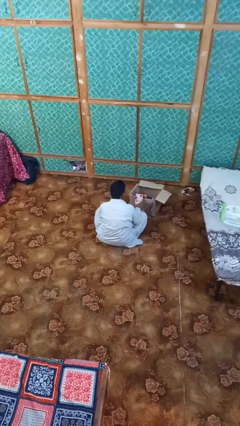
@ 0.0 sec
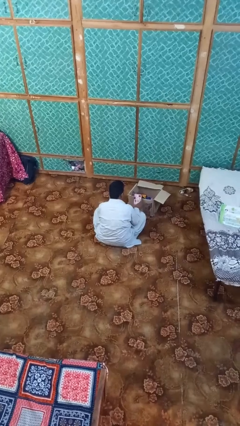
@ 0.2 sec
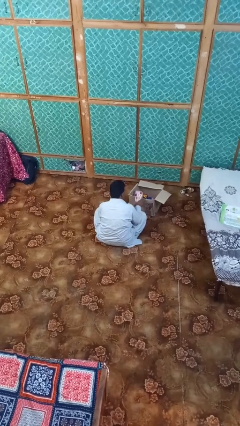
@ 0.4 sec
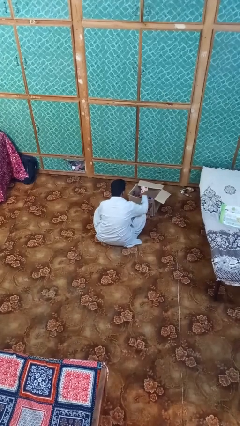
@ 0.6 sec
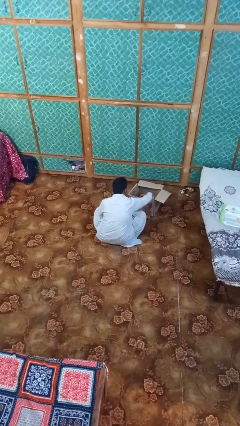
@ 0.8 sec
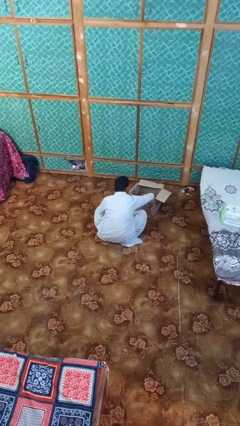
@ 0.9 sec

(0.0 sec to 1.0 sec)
person puts object into box

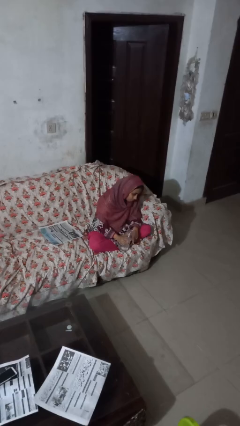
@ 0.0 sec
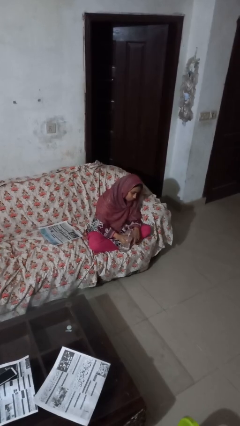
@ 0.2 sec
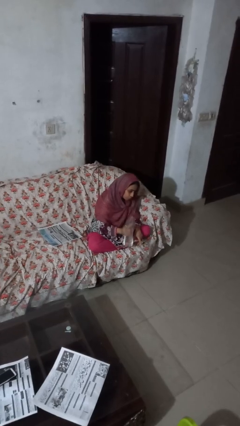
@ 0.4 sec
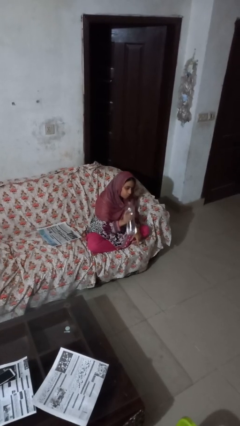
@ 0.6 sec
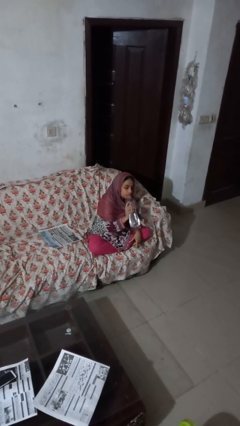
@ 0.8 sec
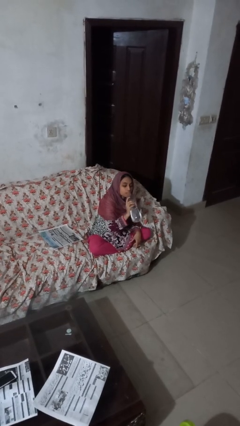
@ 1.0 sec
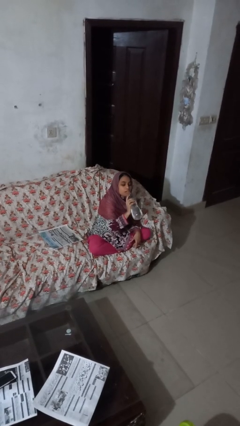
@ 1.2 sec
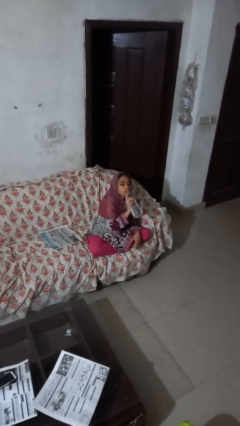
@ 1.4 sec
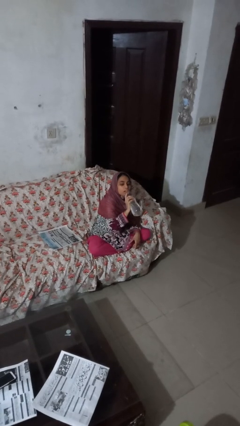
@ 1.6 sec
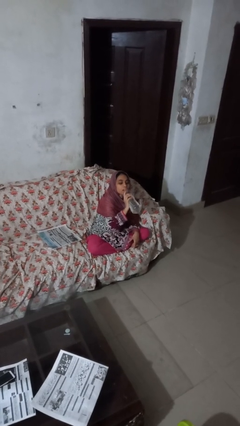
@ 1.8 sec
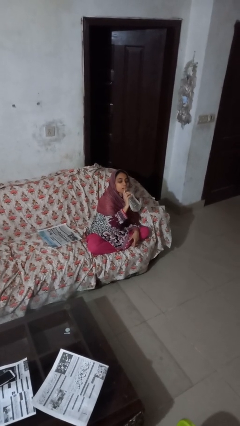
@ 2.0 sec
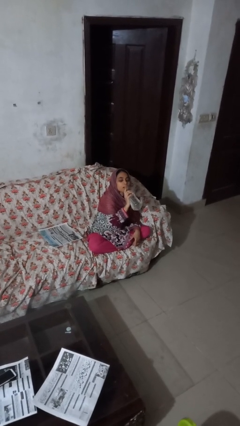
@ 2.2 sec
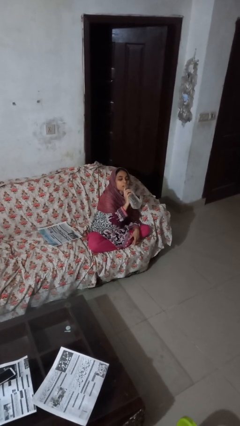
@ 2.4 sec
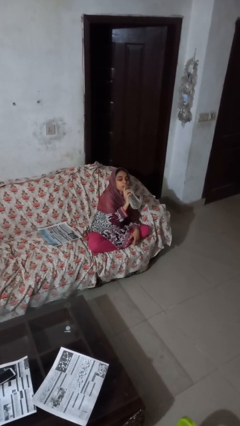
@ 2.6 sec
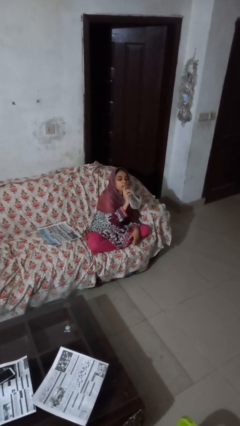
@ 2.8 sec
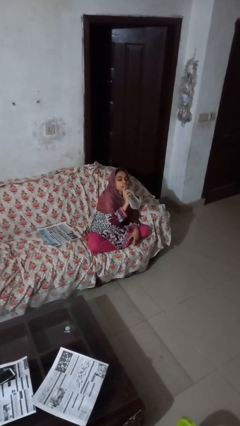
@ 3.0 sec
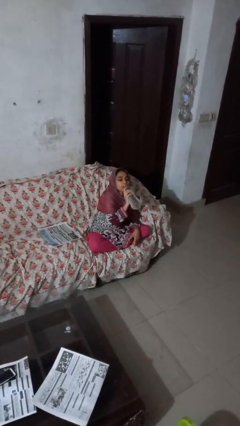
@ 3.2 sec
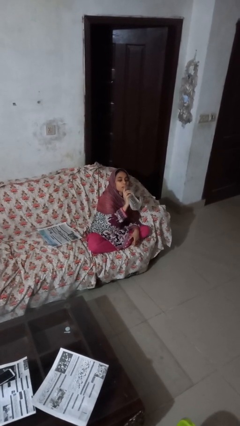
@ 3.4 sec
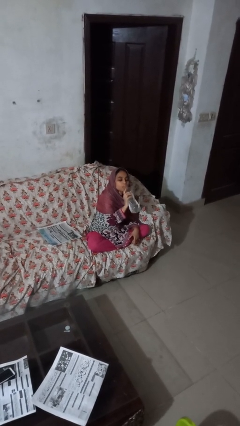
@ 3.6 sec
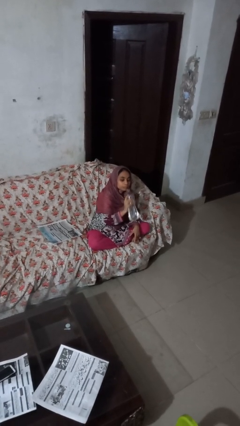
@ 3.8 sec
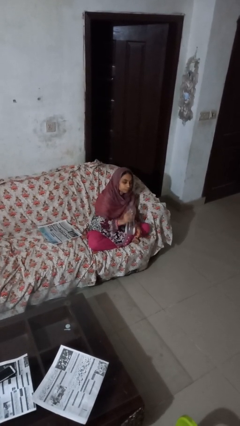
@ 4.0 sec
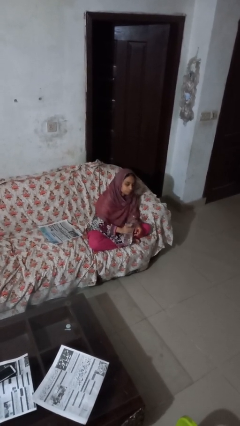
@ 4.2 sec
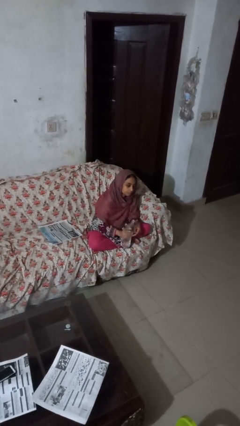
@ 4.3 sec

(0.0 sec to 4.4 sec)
person drinks from bottle

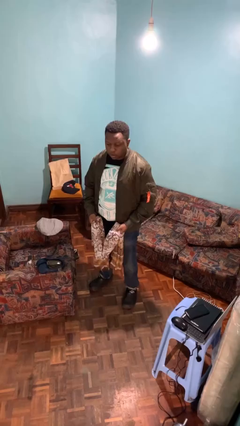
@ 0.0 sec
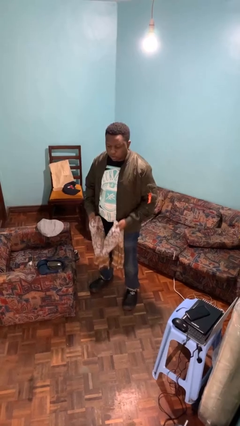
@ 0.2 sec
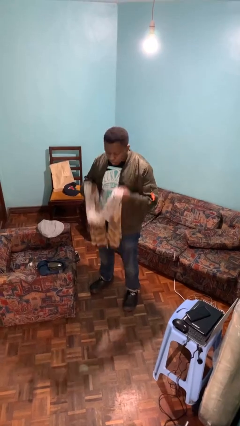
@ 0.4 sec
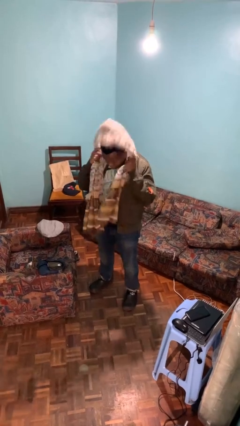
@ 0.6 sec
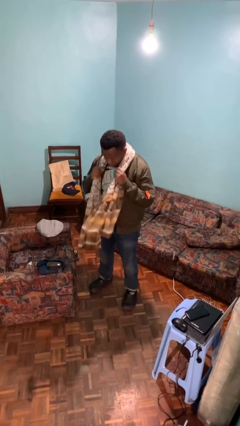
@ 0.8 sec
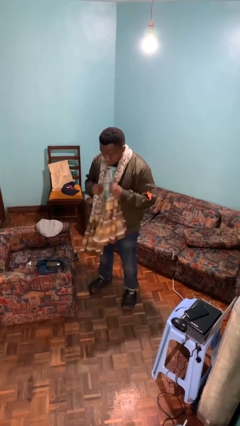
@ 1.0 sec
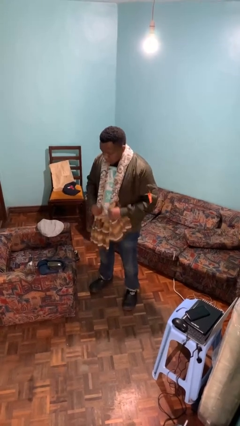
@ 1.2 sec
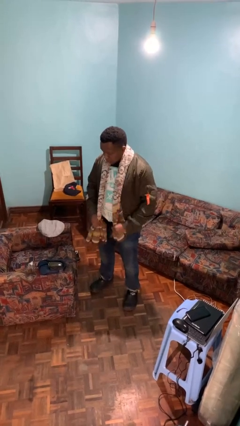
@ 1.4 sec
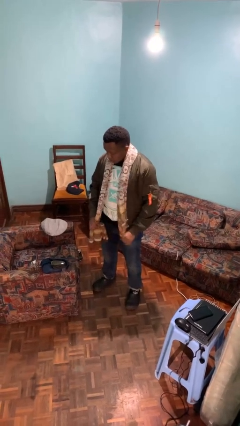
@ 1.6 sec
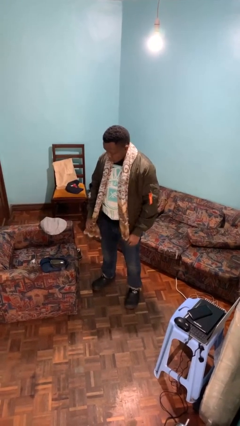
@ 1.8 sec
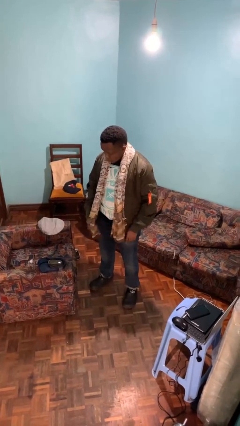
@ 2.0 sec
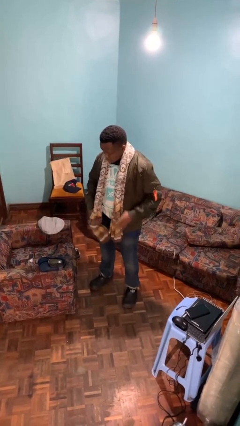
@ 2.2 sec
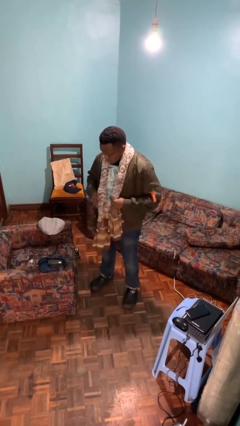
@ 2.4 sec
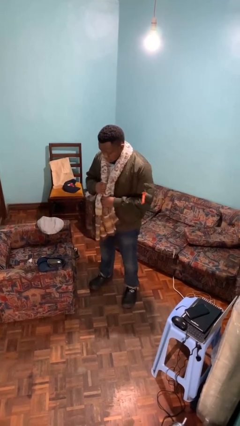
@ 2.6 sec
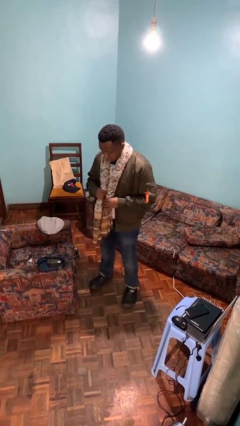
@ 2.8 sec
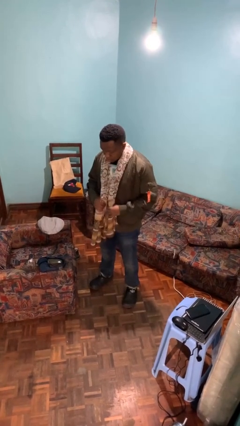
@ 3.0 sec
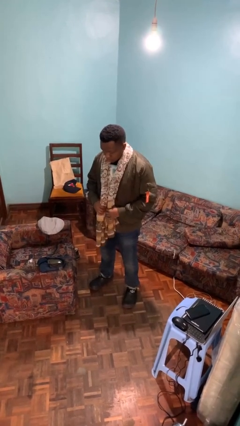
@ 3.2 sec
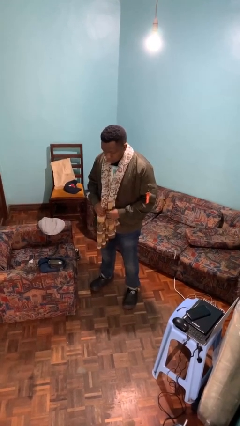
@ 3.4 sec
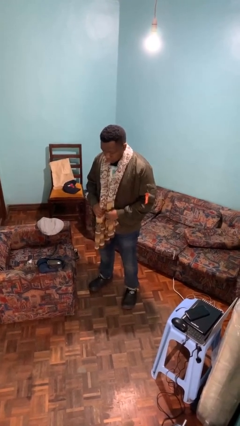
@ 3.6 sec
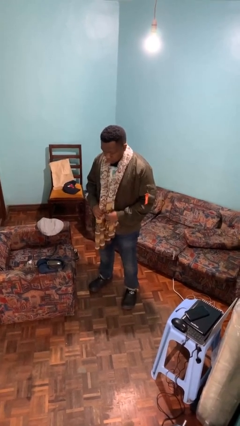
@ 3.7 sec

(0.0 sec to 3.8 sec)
person puts on scarf

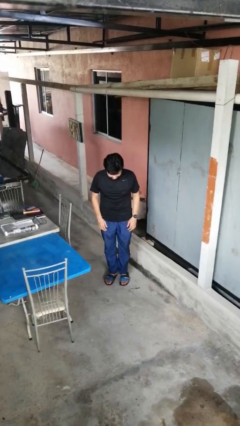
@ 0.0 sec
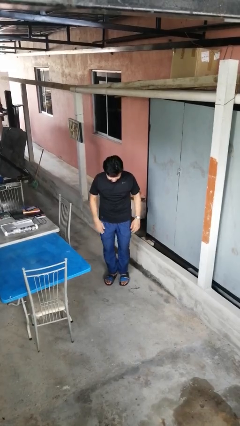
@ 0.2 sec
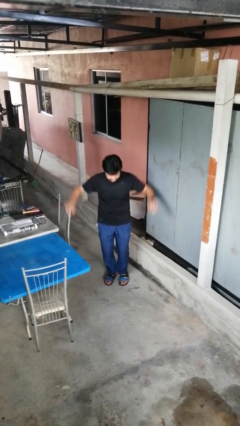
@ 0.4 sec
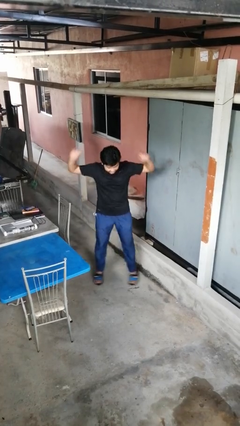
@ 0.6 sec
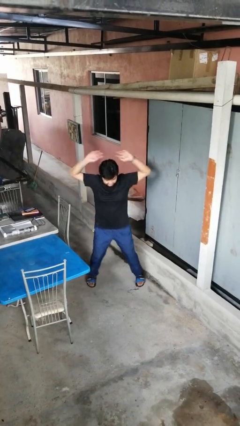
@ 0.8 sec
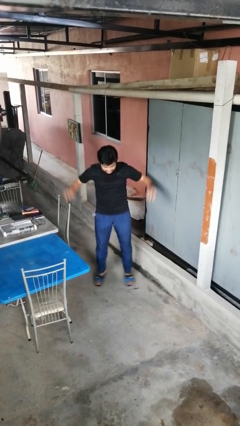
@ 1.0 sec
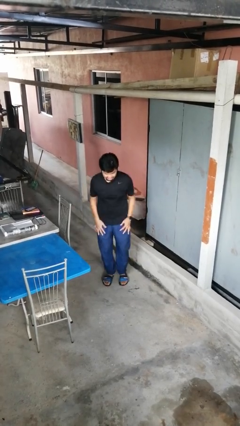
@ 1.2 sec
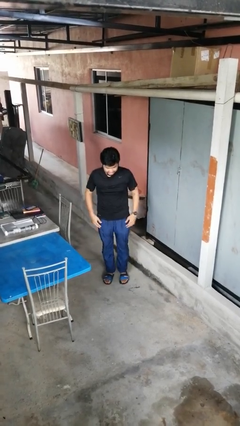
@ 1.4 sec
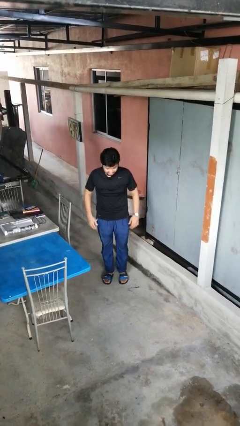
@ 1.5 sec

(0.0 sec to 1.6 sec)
person exercises with jumping jacks

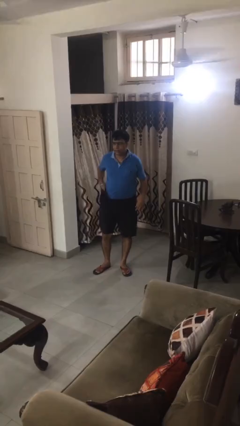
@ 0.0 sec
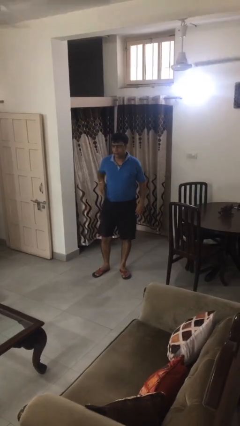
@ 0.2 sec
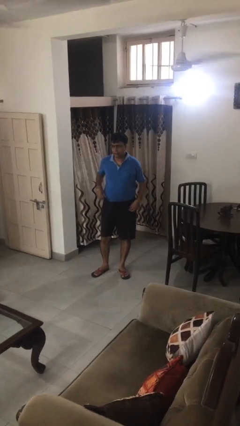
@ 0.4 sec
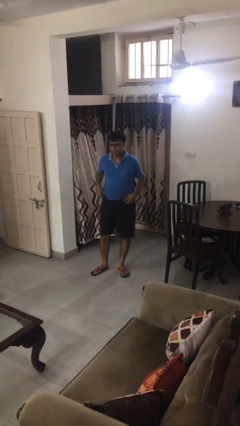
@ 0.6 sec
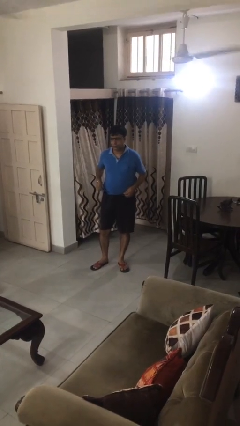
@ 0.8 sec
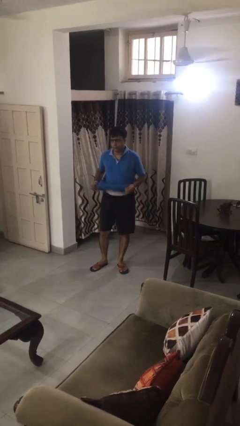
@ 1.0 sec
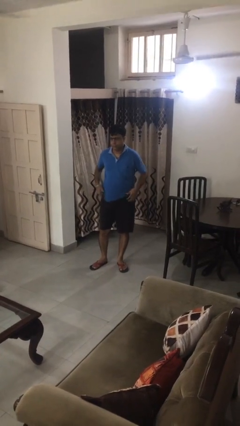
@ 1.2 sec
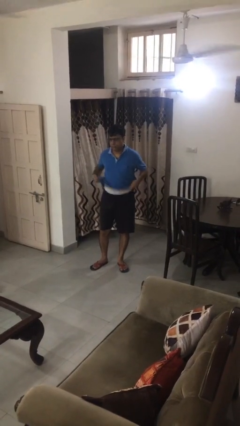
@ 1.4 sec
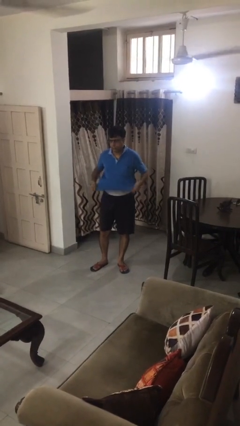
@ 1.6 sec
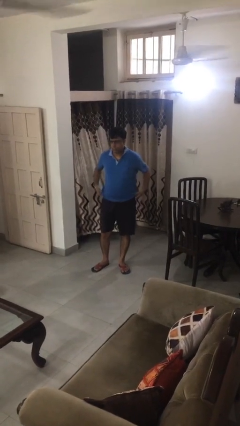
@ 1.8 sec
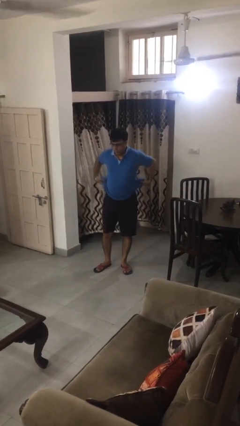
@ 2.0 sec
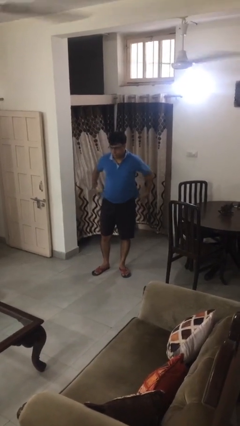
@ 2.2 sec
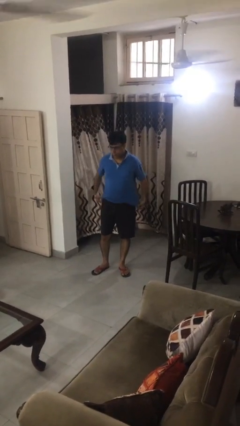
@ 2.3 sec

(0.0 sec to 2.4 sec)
person untucks shirt

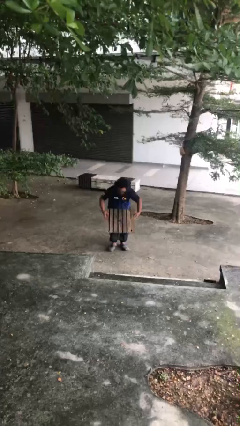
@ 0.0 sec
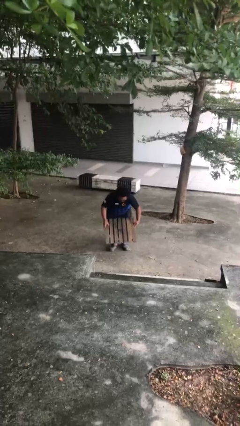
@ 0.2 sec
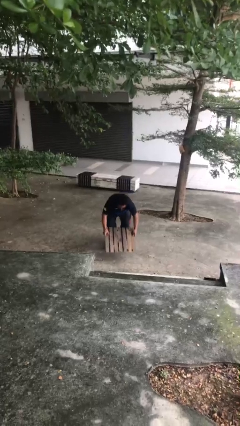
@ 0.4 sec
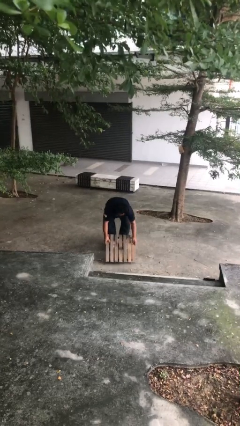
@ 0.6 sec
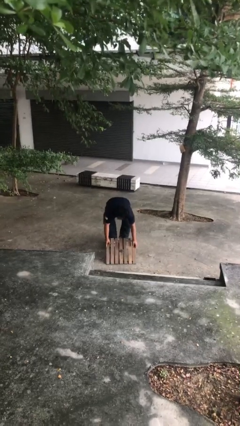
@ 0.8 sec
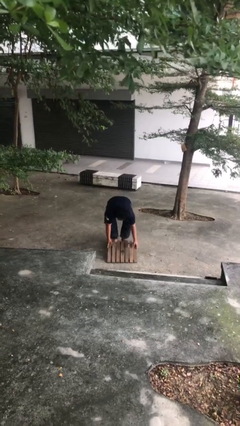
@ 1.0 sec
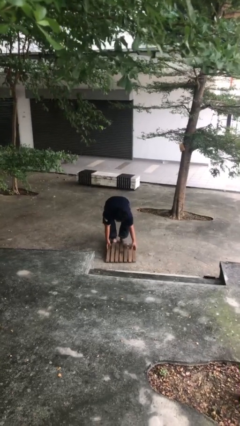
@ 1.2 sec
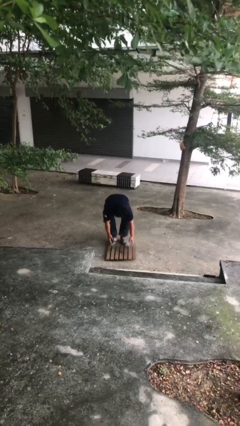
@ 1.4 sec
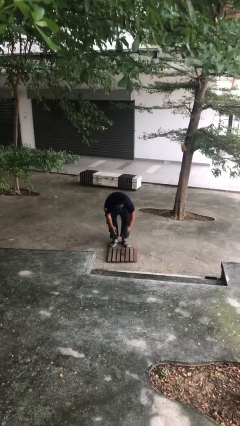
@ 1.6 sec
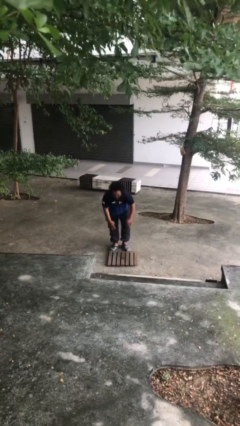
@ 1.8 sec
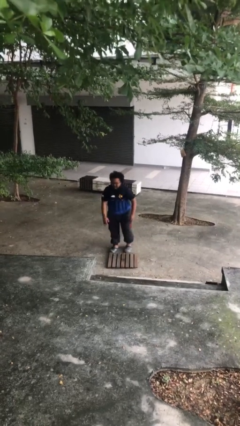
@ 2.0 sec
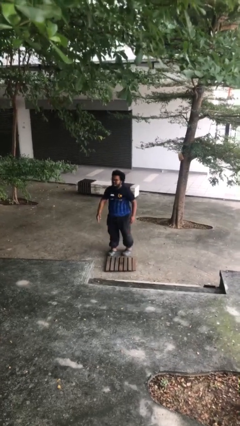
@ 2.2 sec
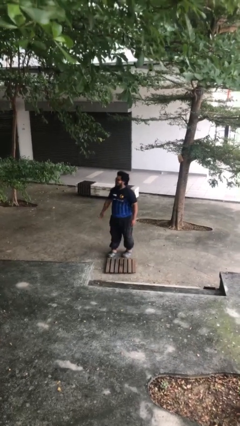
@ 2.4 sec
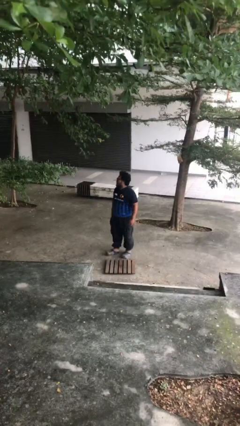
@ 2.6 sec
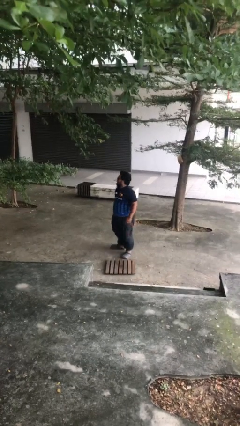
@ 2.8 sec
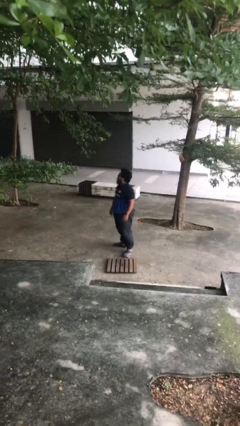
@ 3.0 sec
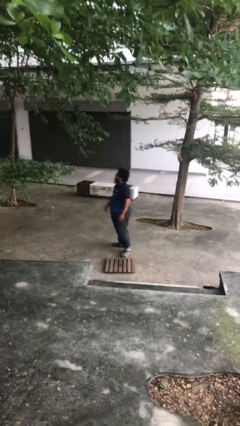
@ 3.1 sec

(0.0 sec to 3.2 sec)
person puts down object on floor

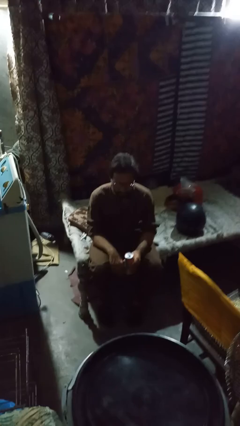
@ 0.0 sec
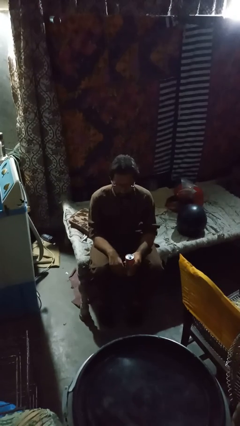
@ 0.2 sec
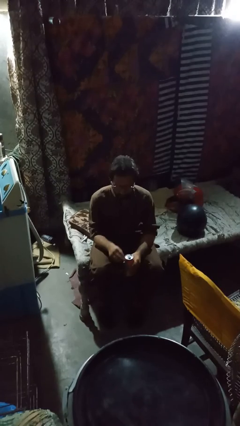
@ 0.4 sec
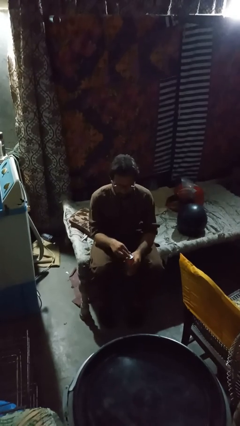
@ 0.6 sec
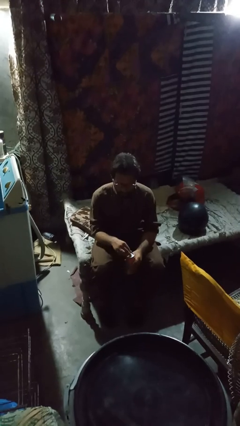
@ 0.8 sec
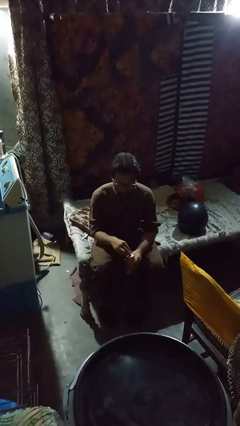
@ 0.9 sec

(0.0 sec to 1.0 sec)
person opens can with can opener
